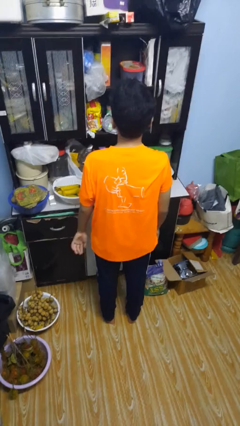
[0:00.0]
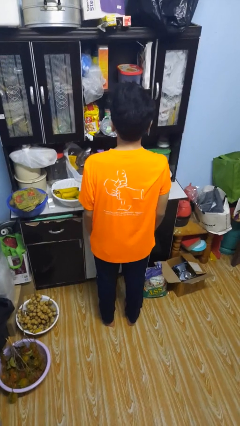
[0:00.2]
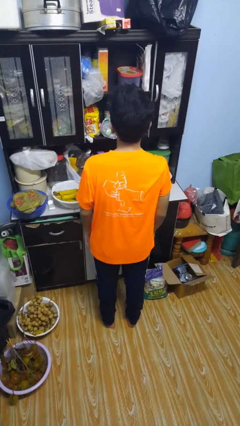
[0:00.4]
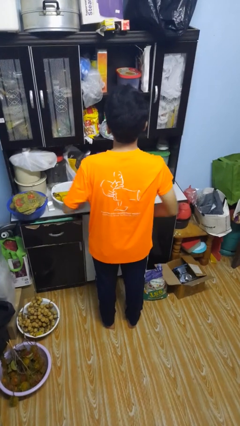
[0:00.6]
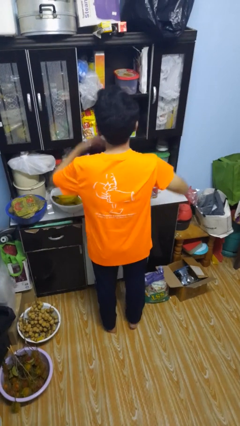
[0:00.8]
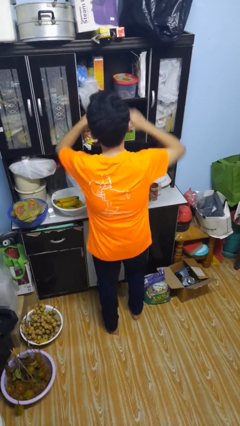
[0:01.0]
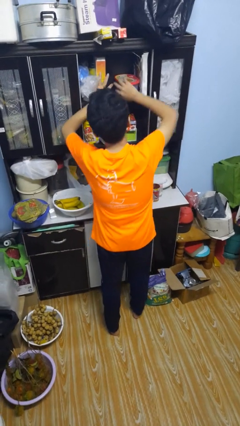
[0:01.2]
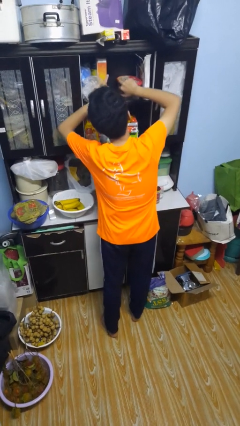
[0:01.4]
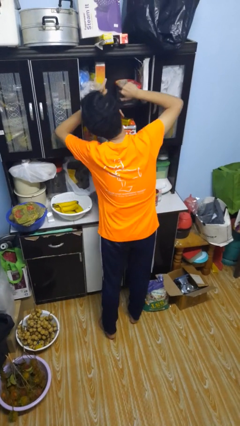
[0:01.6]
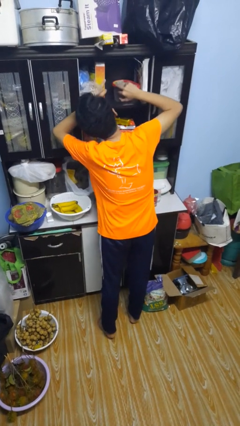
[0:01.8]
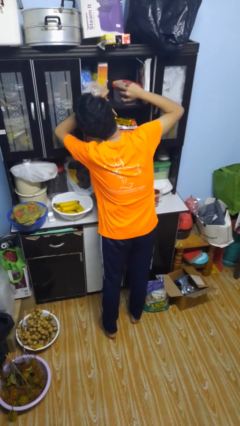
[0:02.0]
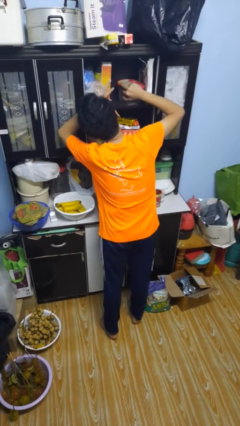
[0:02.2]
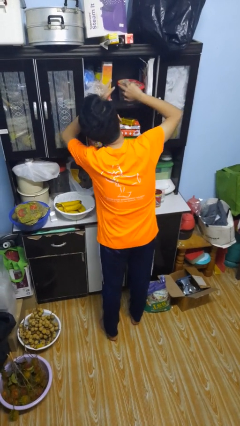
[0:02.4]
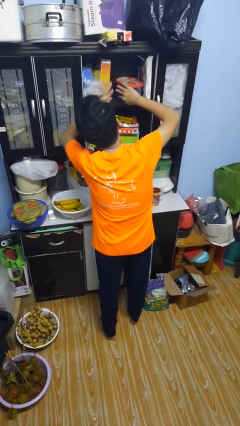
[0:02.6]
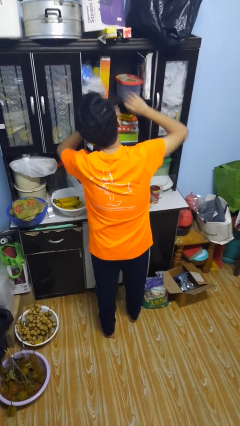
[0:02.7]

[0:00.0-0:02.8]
person searches in cabinet

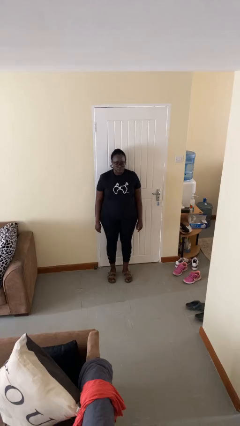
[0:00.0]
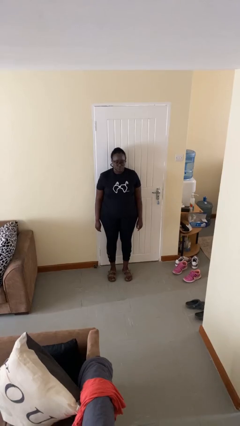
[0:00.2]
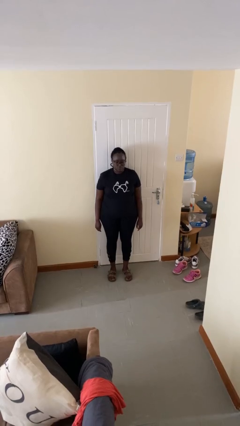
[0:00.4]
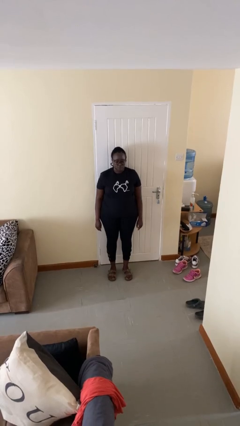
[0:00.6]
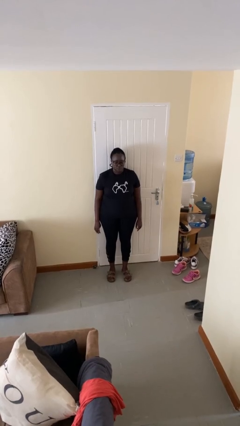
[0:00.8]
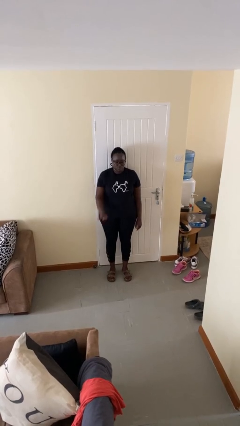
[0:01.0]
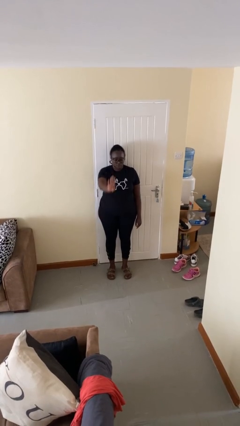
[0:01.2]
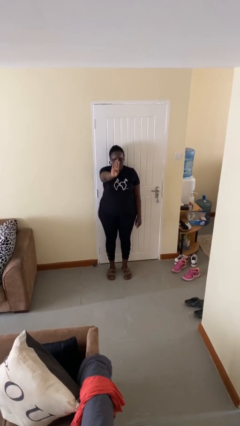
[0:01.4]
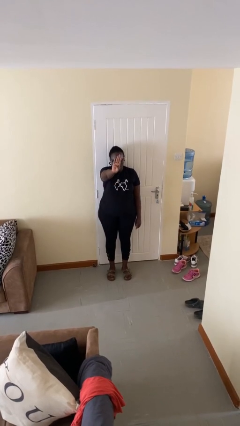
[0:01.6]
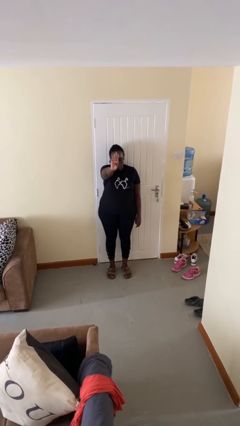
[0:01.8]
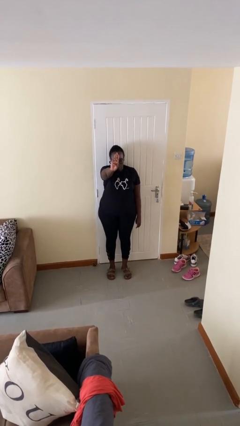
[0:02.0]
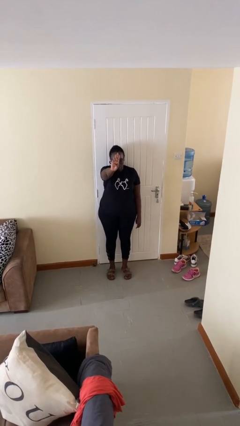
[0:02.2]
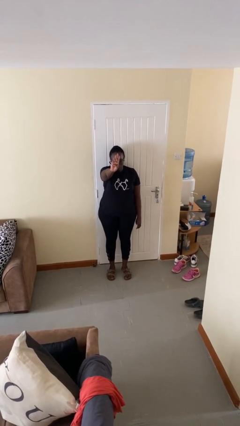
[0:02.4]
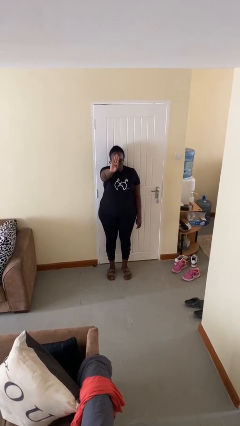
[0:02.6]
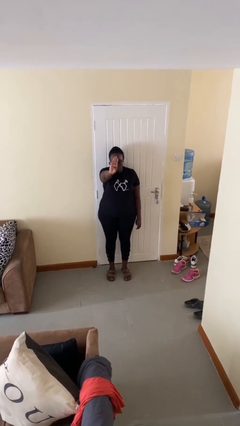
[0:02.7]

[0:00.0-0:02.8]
person gestures number four

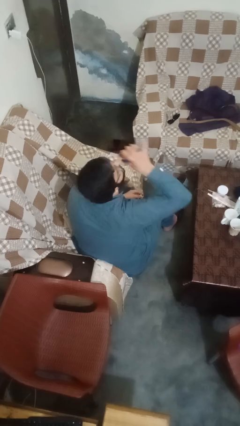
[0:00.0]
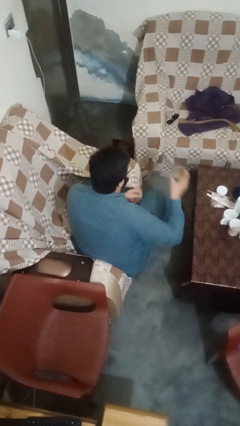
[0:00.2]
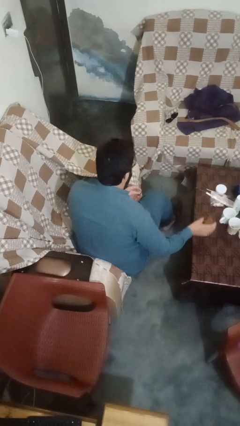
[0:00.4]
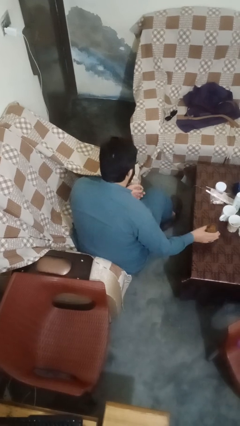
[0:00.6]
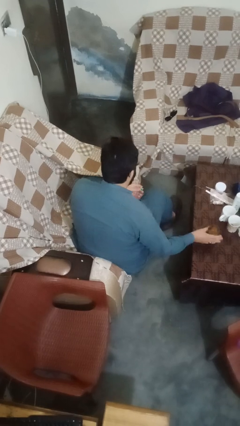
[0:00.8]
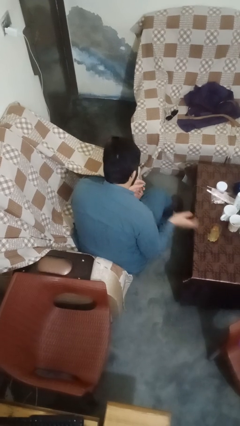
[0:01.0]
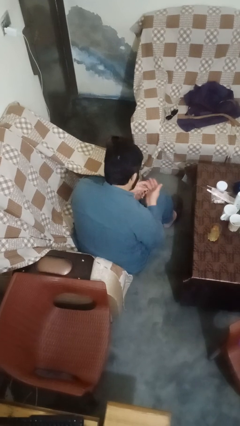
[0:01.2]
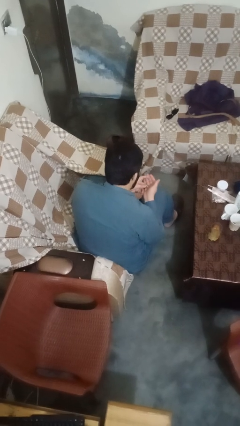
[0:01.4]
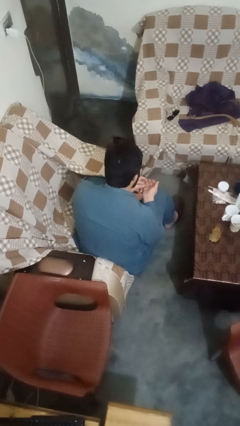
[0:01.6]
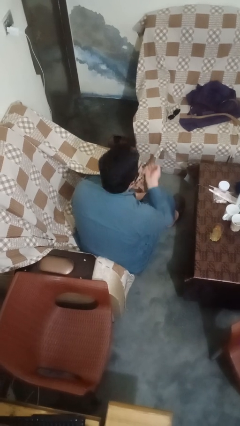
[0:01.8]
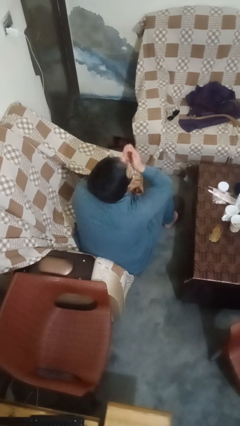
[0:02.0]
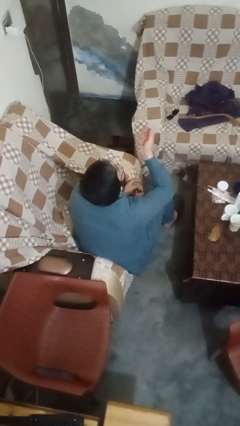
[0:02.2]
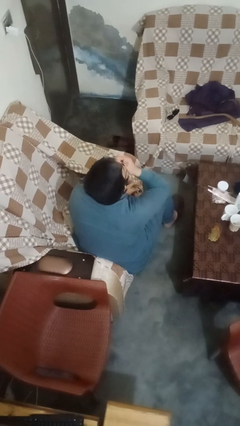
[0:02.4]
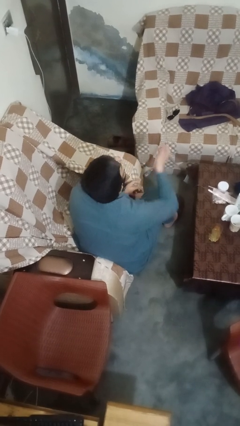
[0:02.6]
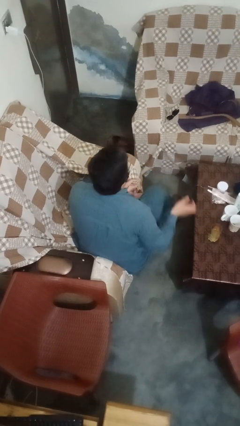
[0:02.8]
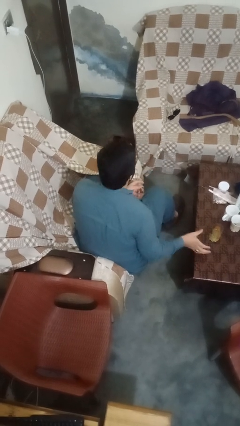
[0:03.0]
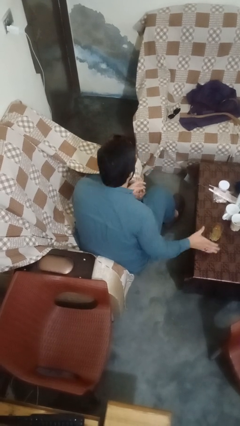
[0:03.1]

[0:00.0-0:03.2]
person takes medicine pills

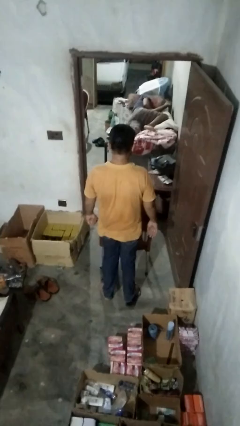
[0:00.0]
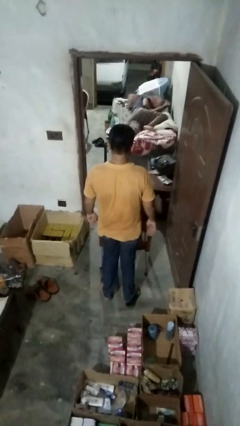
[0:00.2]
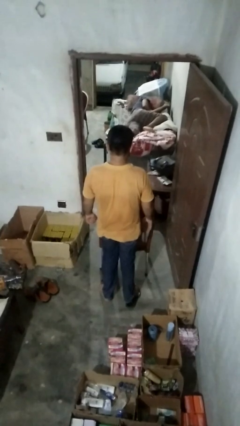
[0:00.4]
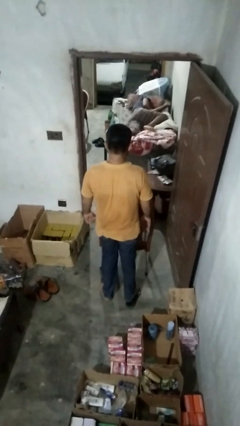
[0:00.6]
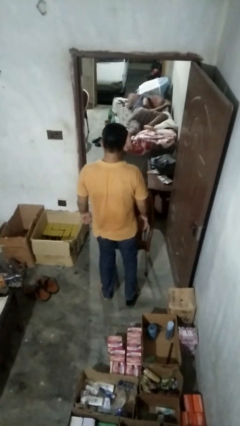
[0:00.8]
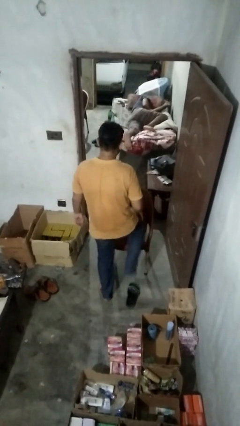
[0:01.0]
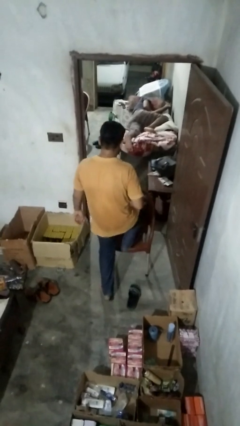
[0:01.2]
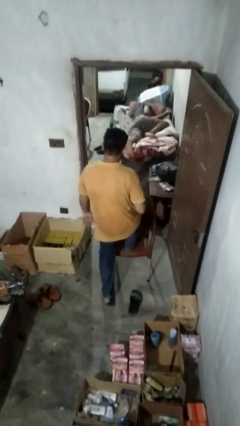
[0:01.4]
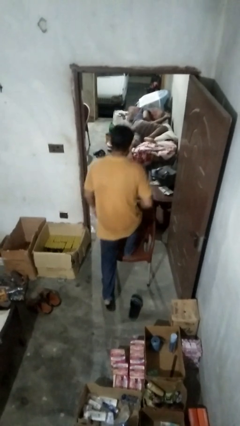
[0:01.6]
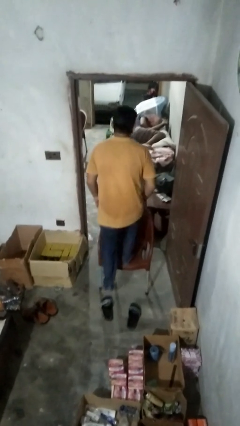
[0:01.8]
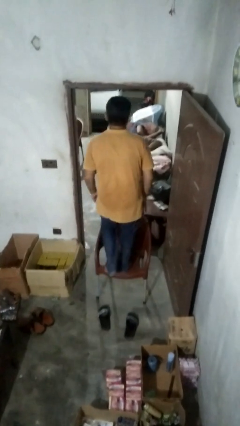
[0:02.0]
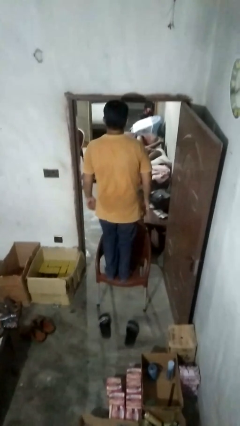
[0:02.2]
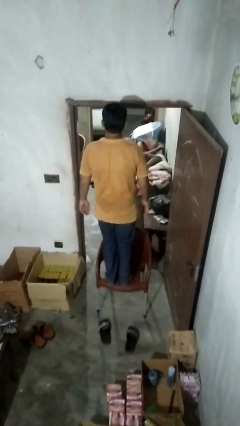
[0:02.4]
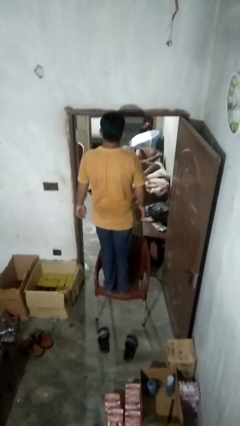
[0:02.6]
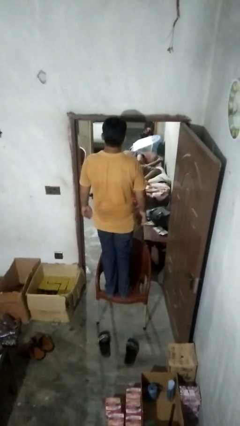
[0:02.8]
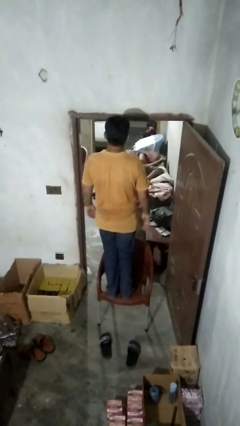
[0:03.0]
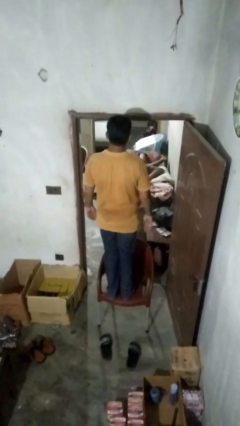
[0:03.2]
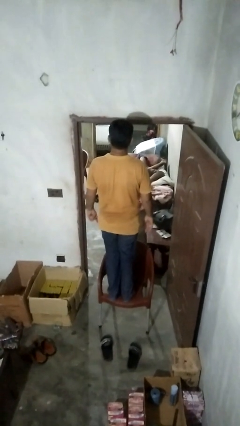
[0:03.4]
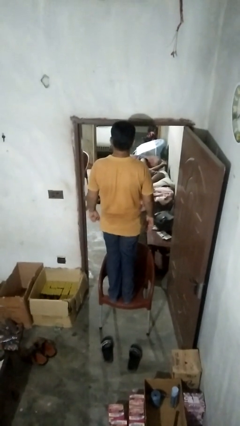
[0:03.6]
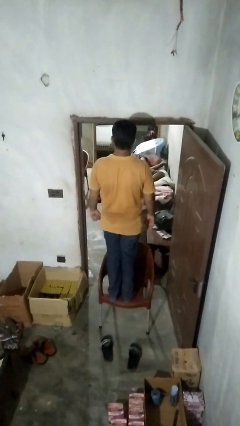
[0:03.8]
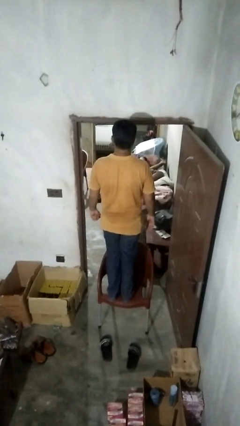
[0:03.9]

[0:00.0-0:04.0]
person climbs on chair

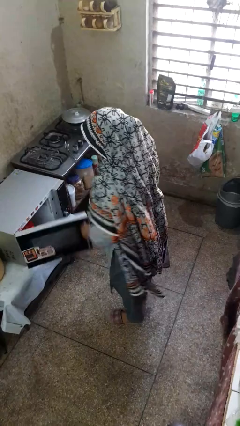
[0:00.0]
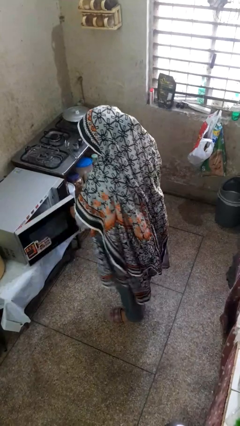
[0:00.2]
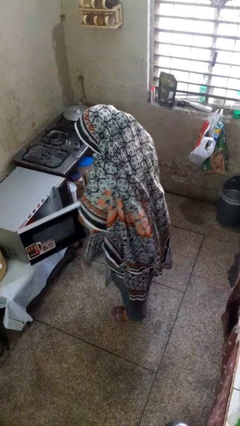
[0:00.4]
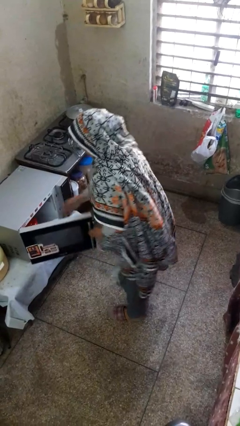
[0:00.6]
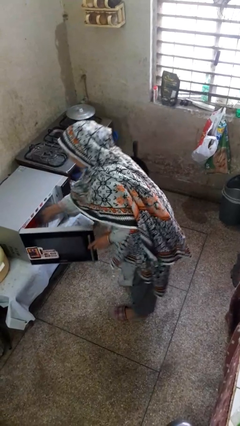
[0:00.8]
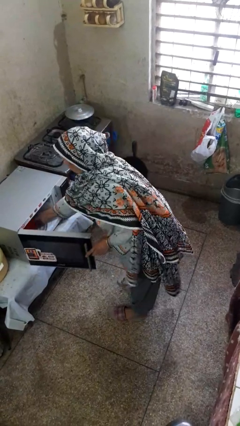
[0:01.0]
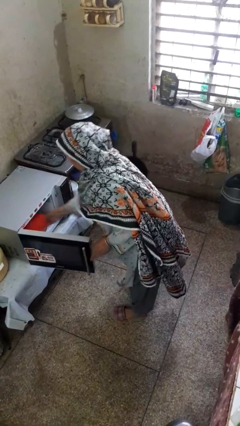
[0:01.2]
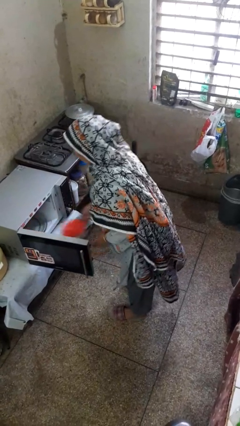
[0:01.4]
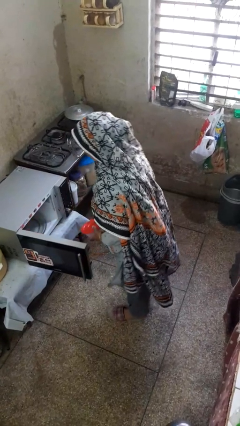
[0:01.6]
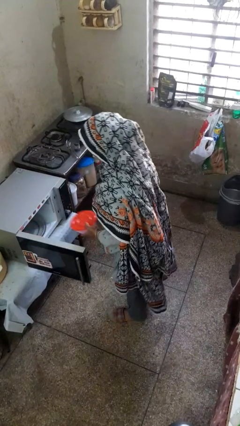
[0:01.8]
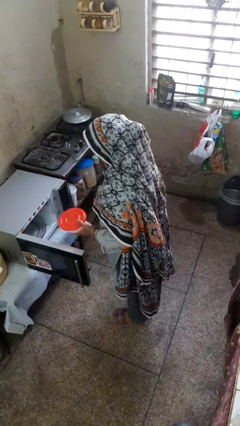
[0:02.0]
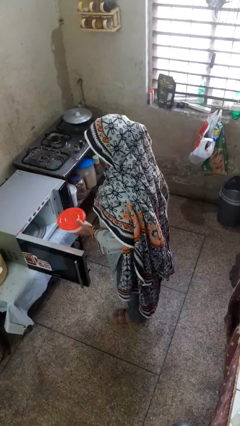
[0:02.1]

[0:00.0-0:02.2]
person takes object from microwave

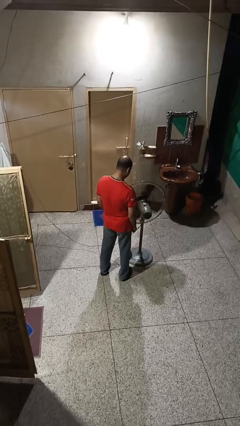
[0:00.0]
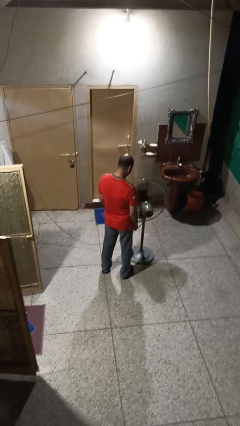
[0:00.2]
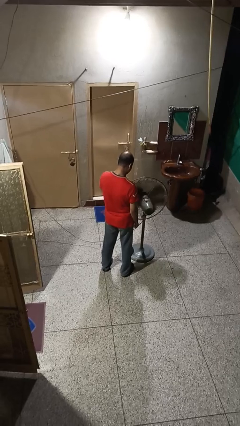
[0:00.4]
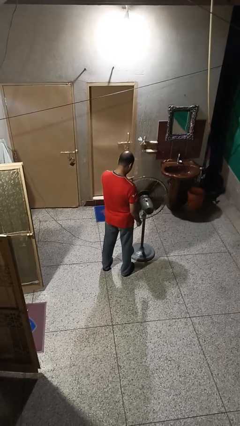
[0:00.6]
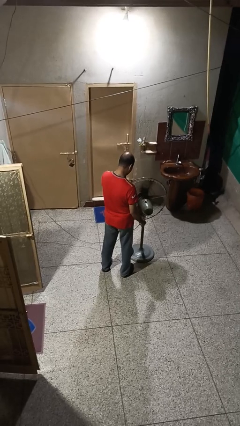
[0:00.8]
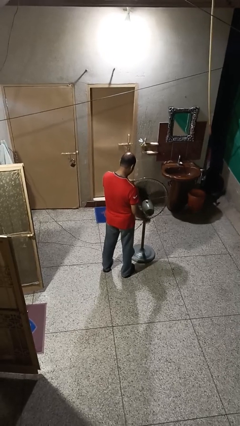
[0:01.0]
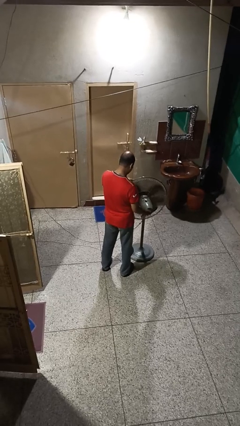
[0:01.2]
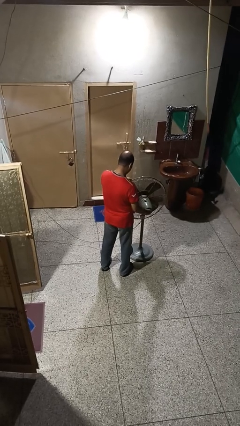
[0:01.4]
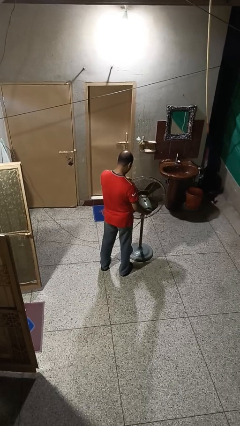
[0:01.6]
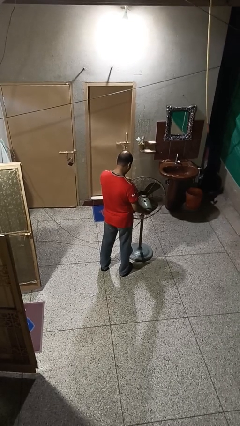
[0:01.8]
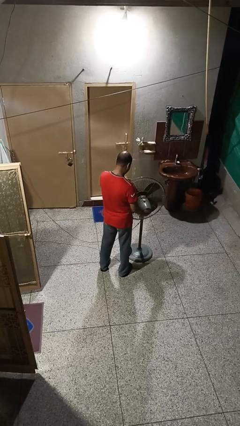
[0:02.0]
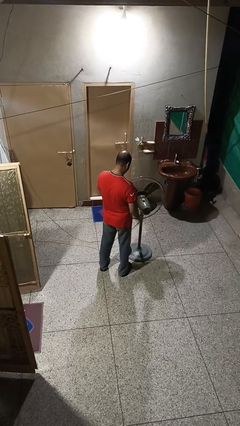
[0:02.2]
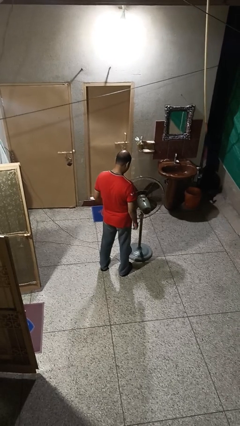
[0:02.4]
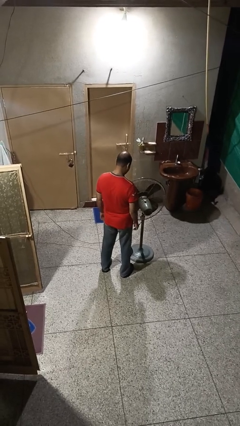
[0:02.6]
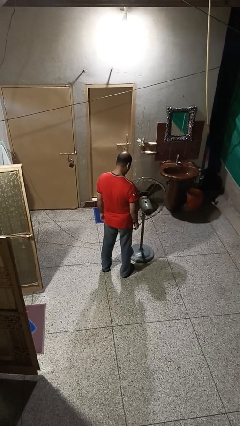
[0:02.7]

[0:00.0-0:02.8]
person turns off fan
